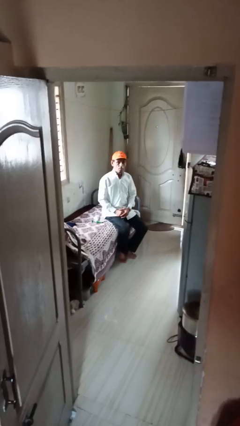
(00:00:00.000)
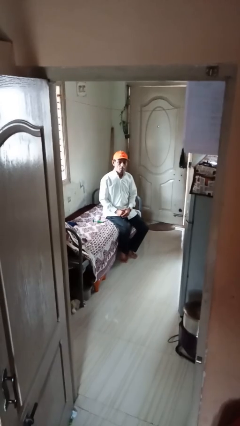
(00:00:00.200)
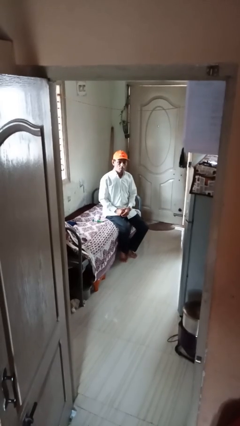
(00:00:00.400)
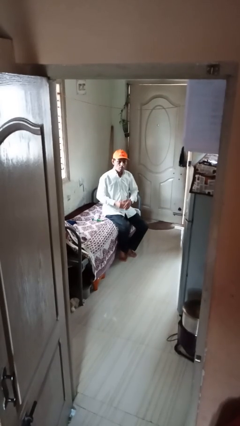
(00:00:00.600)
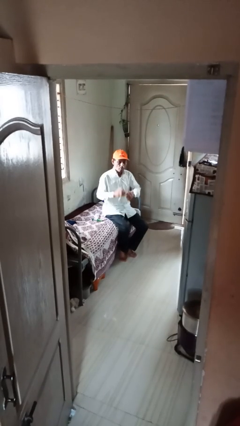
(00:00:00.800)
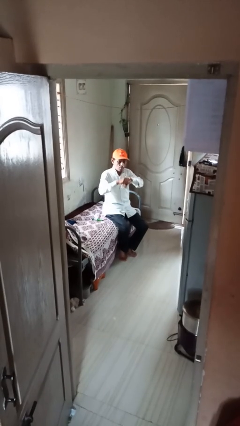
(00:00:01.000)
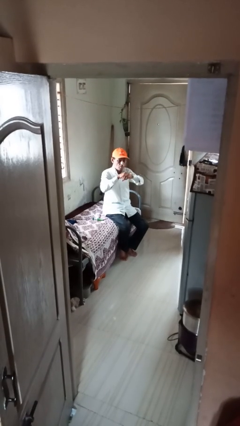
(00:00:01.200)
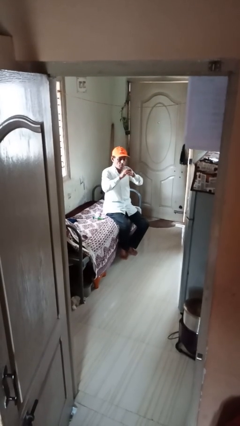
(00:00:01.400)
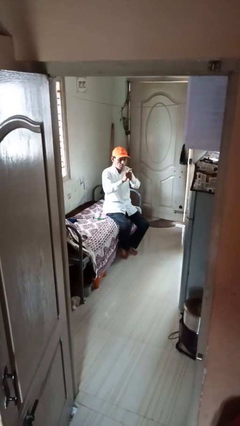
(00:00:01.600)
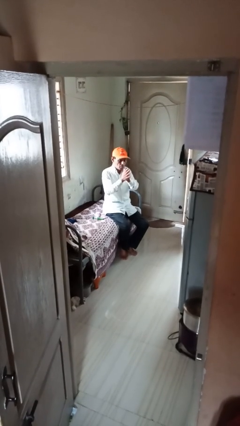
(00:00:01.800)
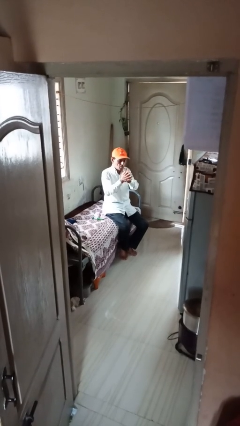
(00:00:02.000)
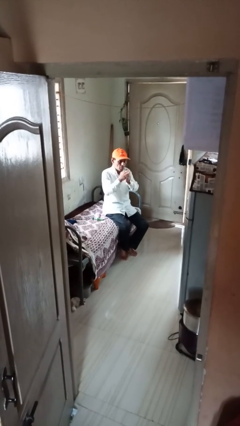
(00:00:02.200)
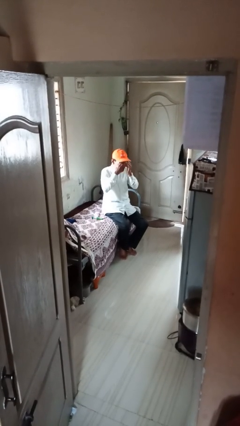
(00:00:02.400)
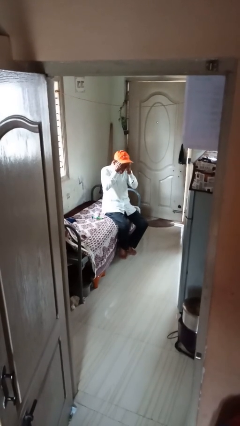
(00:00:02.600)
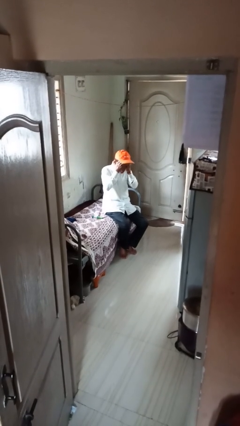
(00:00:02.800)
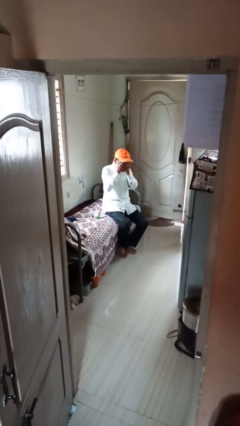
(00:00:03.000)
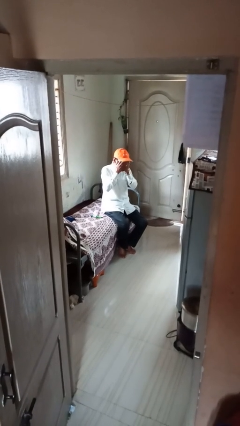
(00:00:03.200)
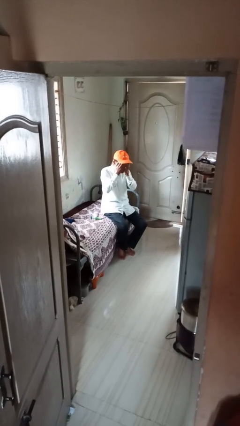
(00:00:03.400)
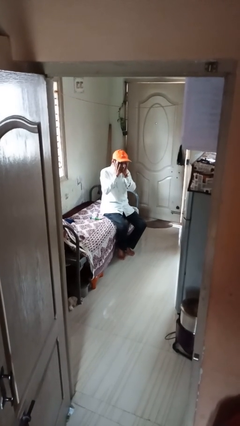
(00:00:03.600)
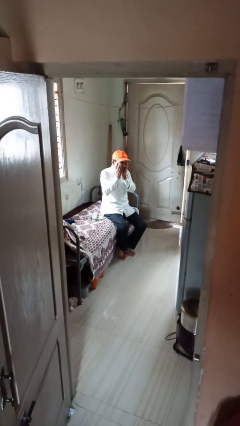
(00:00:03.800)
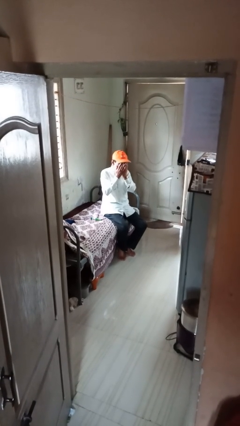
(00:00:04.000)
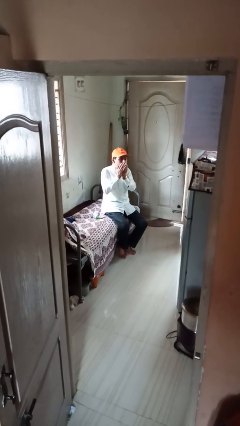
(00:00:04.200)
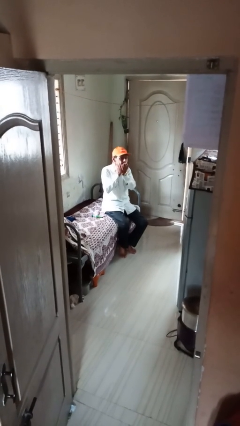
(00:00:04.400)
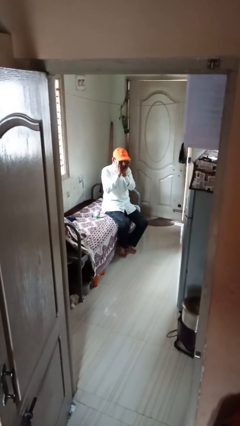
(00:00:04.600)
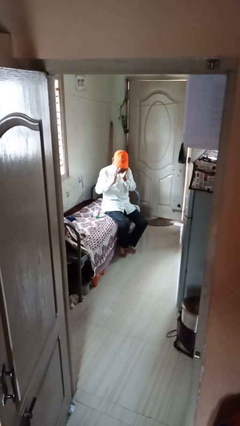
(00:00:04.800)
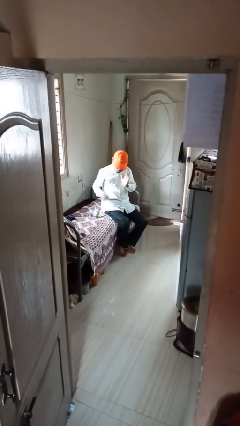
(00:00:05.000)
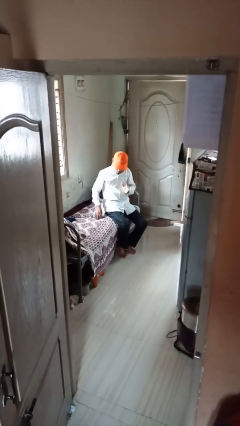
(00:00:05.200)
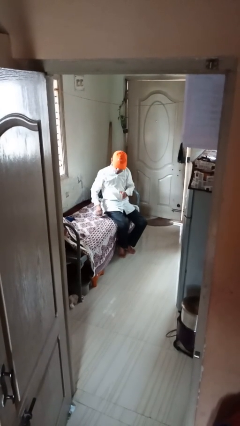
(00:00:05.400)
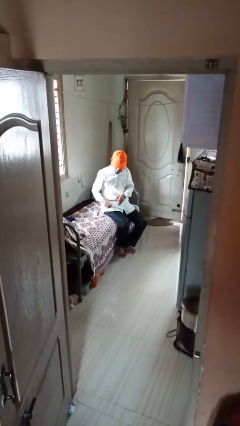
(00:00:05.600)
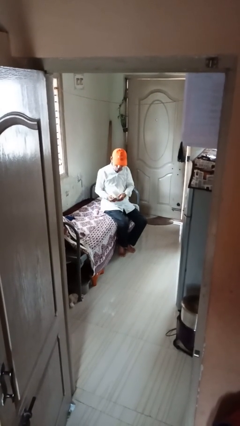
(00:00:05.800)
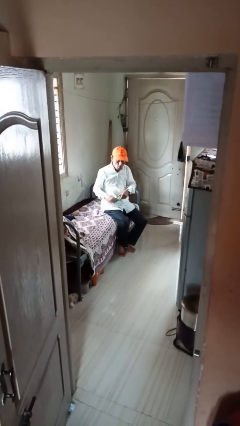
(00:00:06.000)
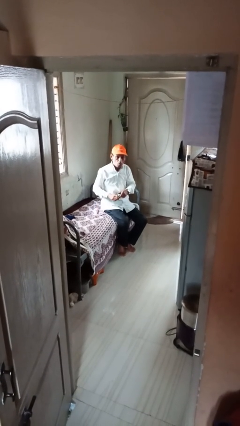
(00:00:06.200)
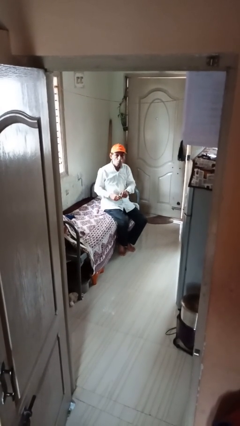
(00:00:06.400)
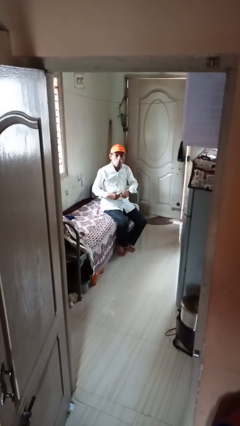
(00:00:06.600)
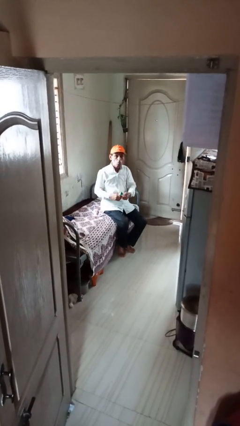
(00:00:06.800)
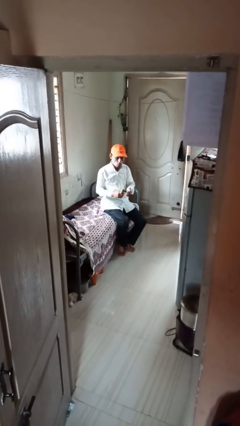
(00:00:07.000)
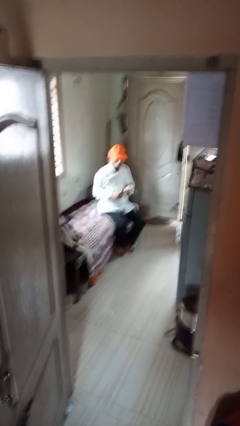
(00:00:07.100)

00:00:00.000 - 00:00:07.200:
person applies sunscreen

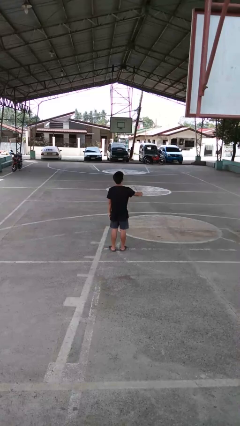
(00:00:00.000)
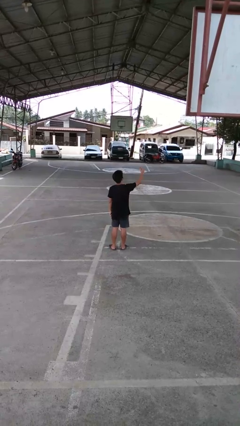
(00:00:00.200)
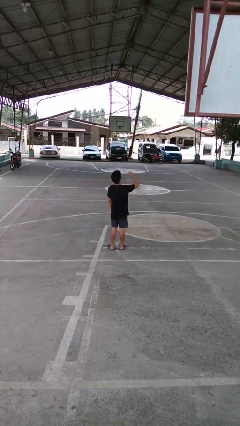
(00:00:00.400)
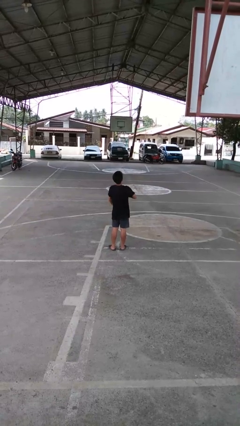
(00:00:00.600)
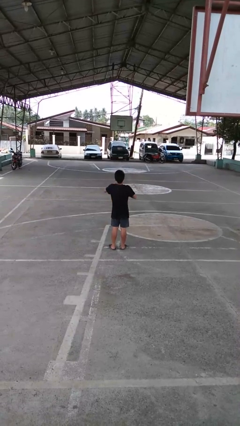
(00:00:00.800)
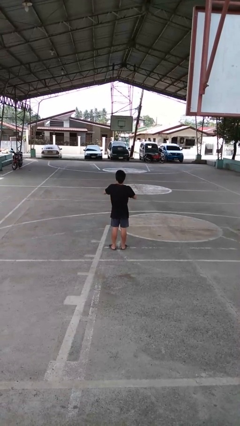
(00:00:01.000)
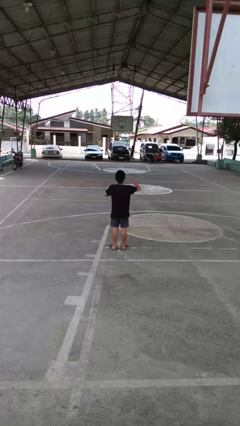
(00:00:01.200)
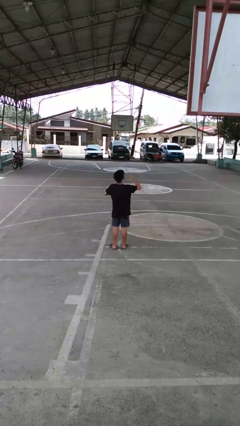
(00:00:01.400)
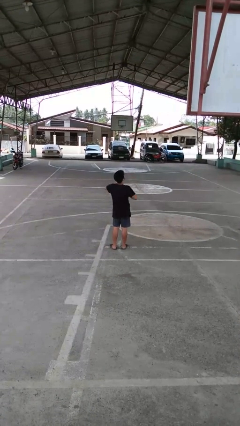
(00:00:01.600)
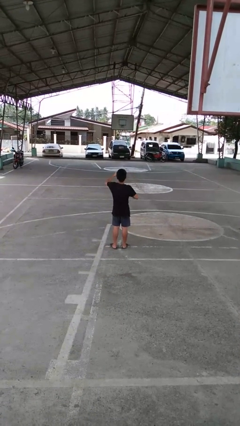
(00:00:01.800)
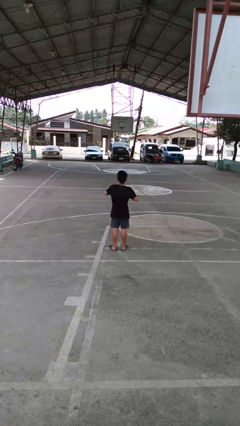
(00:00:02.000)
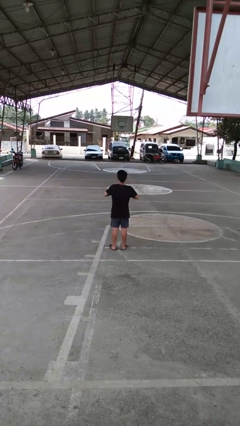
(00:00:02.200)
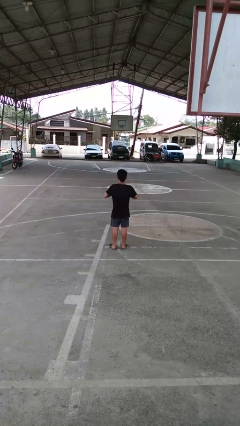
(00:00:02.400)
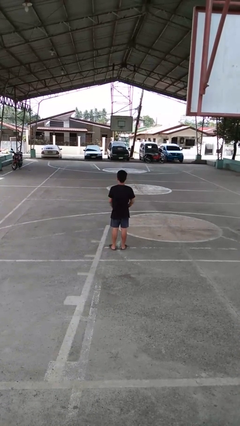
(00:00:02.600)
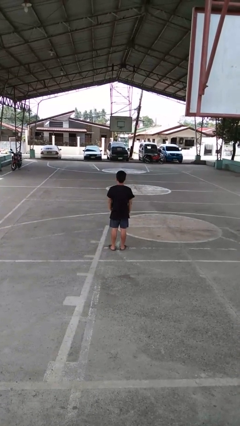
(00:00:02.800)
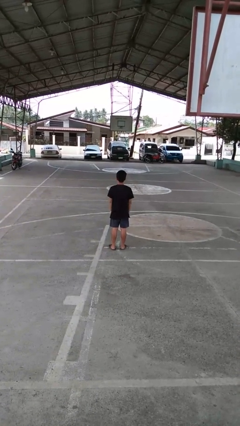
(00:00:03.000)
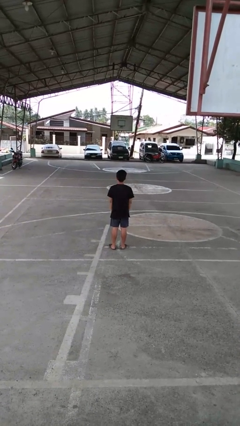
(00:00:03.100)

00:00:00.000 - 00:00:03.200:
person drums on chest

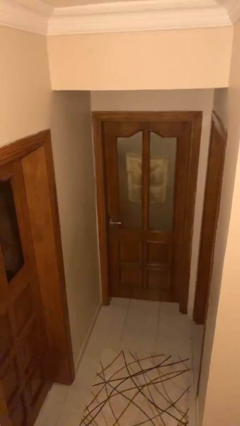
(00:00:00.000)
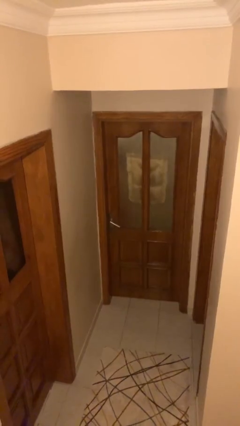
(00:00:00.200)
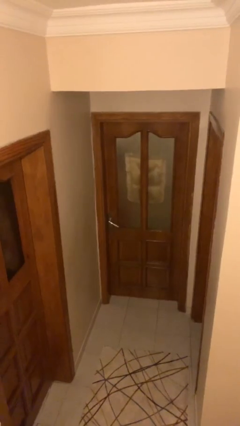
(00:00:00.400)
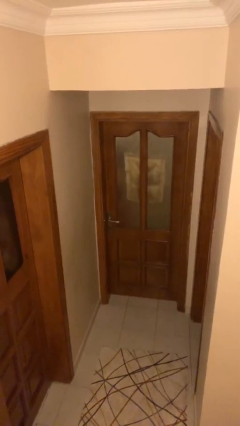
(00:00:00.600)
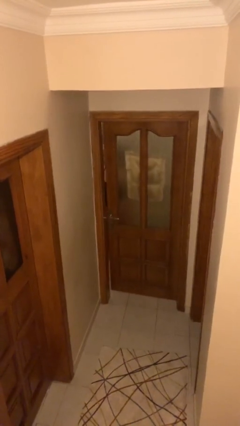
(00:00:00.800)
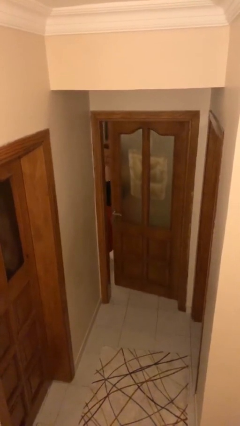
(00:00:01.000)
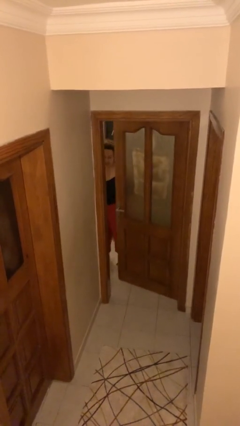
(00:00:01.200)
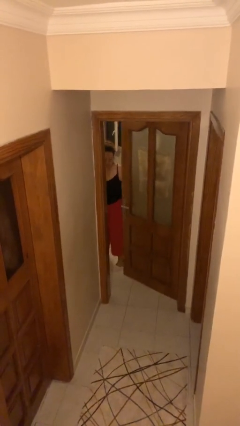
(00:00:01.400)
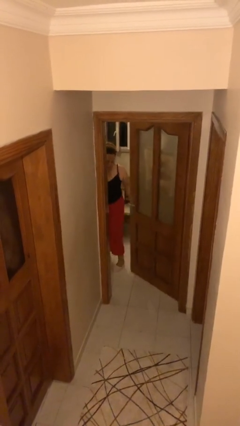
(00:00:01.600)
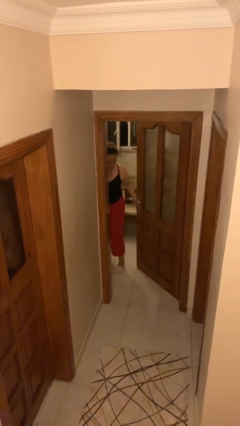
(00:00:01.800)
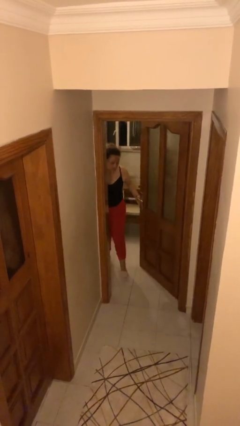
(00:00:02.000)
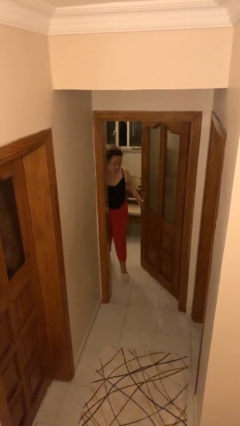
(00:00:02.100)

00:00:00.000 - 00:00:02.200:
person opens facility door

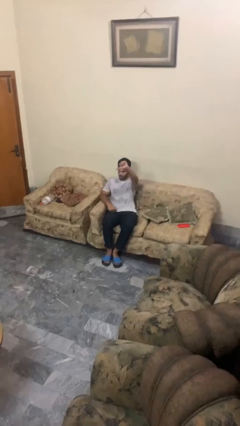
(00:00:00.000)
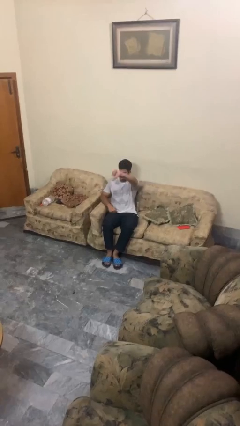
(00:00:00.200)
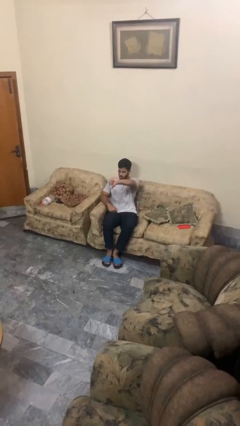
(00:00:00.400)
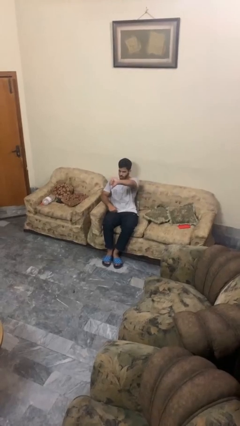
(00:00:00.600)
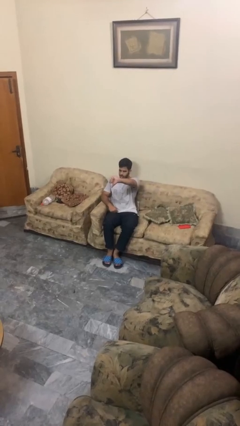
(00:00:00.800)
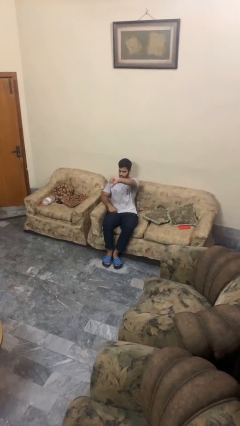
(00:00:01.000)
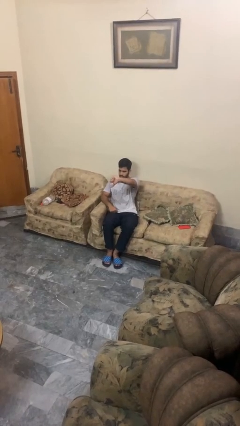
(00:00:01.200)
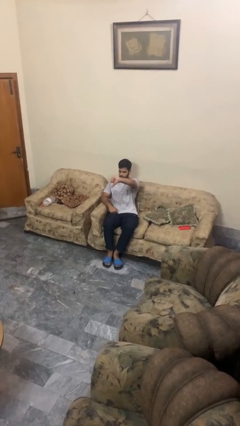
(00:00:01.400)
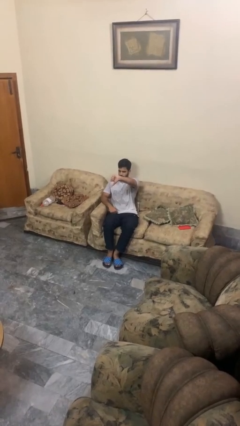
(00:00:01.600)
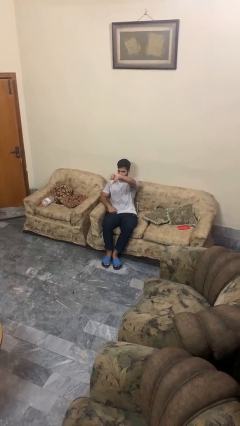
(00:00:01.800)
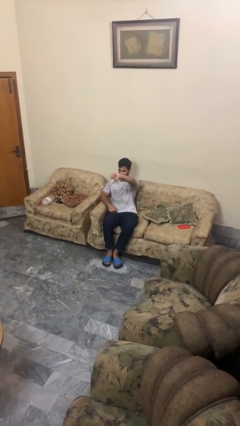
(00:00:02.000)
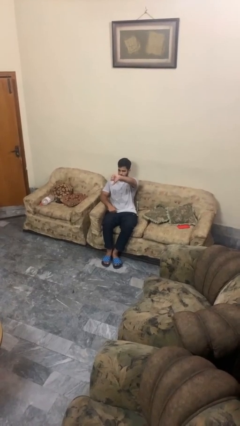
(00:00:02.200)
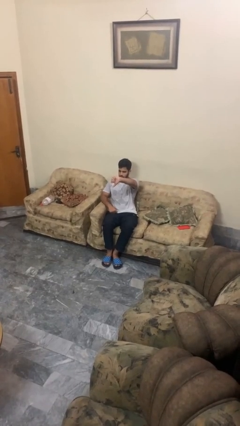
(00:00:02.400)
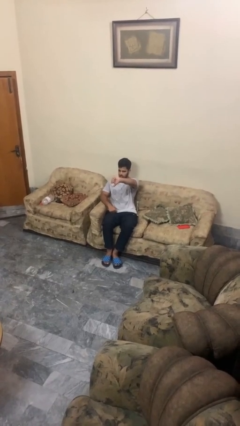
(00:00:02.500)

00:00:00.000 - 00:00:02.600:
person gestures thumbs down

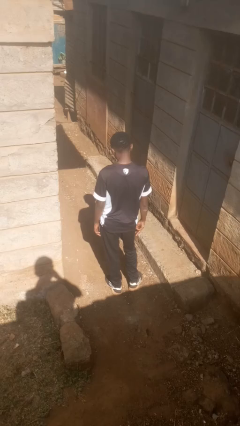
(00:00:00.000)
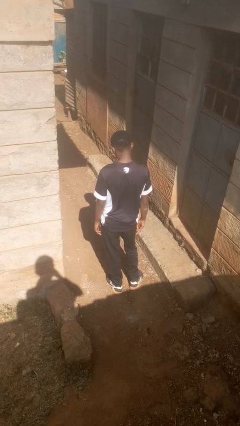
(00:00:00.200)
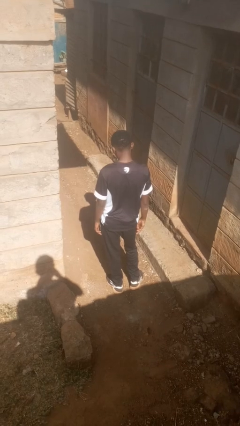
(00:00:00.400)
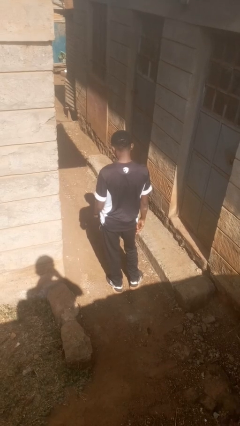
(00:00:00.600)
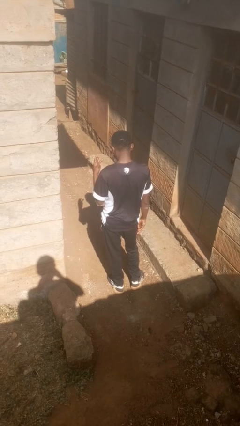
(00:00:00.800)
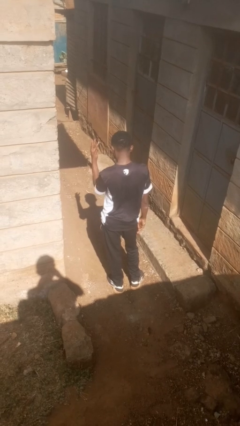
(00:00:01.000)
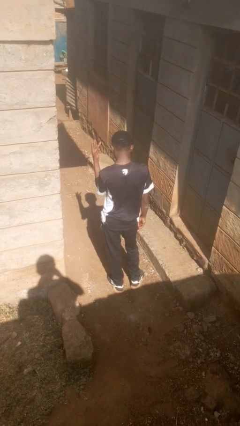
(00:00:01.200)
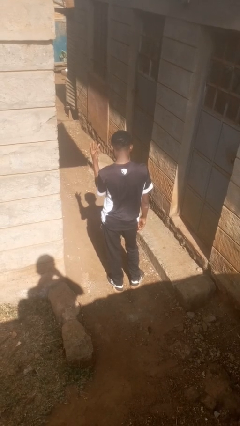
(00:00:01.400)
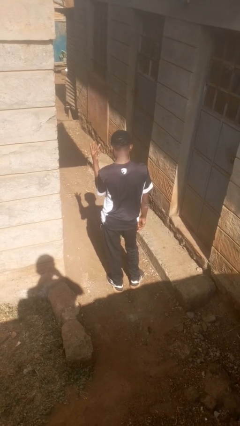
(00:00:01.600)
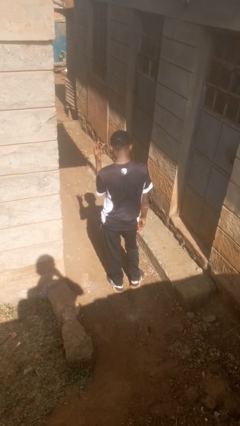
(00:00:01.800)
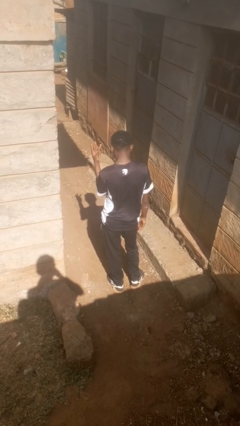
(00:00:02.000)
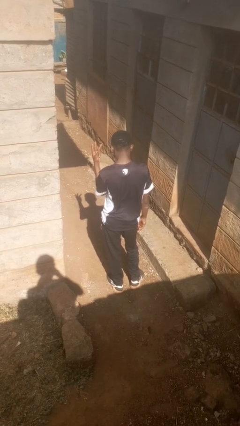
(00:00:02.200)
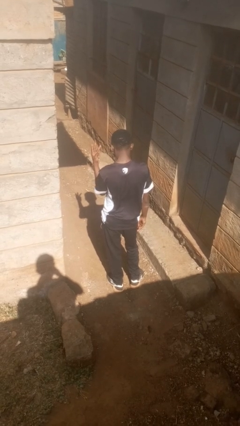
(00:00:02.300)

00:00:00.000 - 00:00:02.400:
person gestures number three
